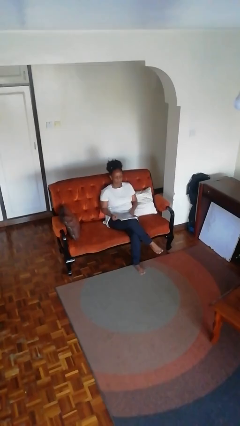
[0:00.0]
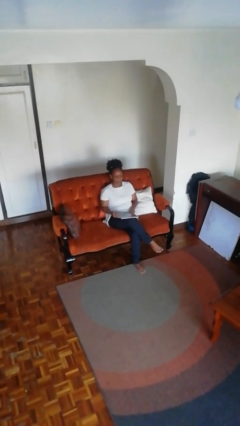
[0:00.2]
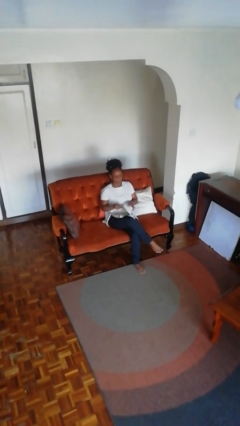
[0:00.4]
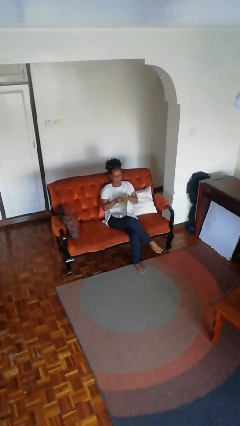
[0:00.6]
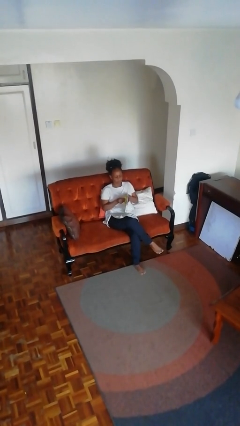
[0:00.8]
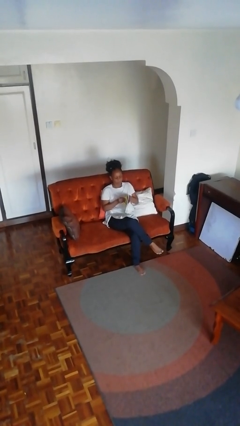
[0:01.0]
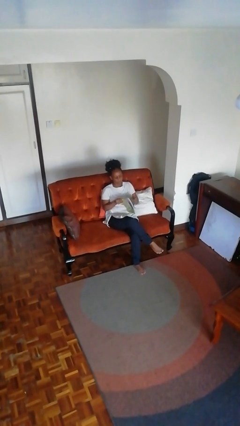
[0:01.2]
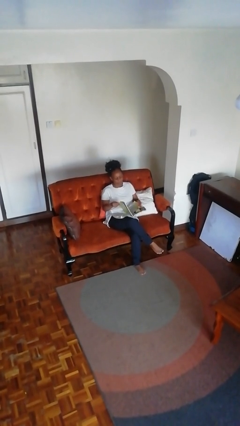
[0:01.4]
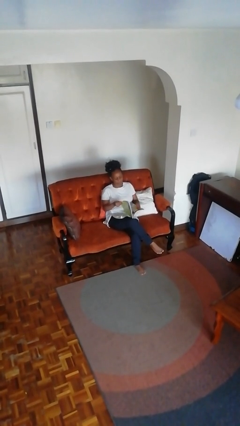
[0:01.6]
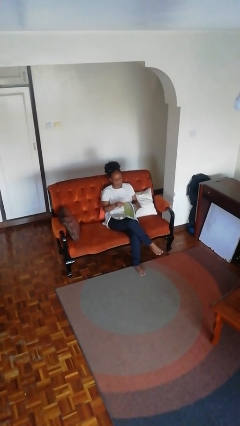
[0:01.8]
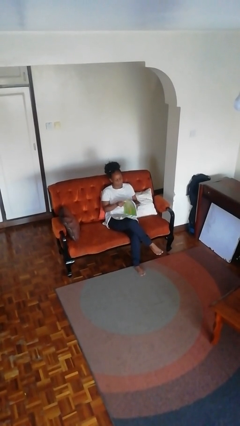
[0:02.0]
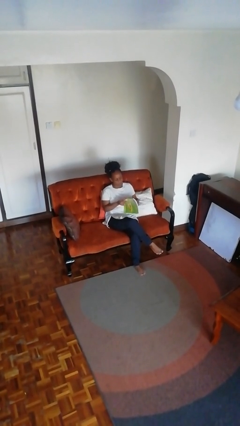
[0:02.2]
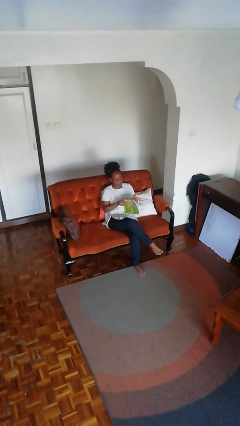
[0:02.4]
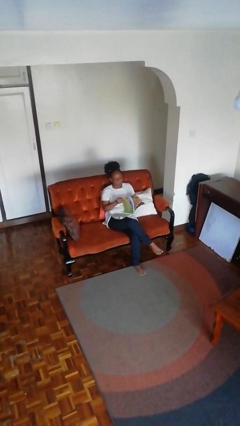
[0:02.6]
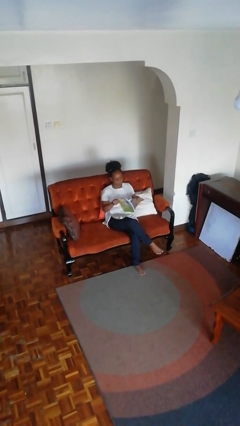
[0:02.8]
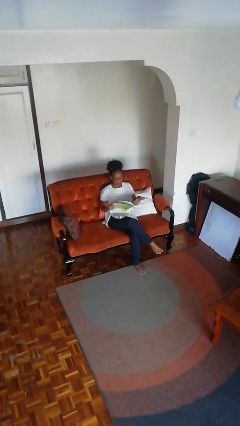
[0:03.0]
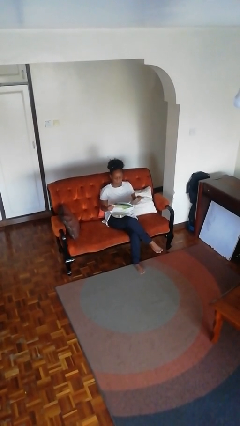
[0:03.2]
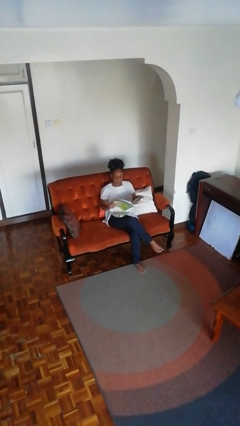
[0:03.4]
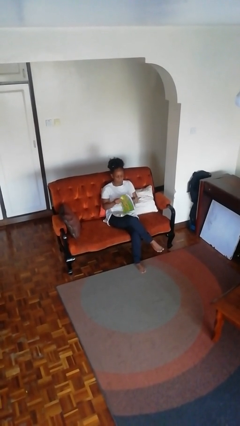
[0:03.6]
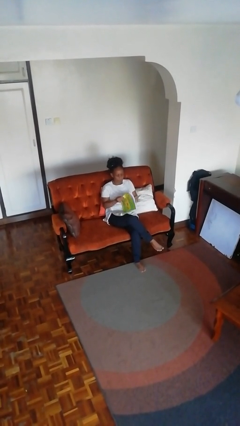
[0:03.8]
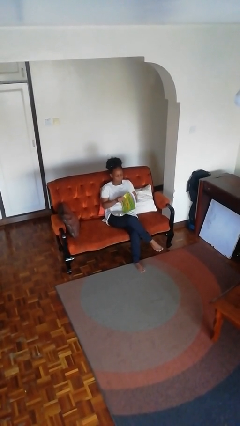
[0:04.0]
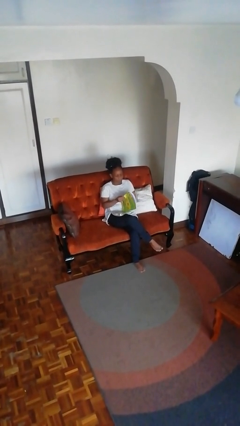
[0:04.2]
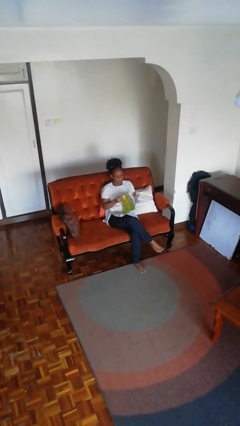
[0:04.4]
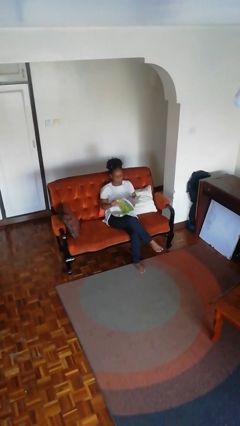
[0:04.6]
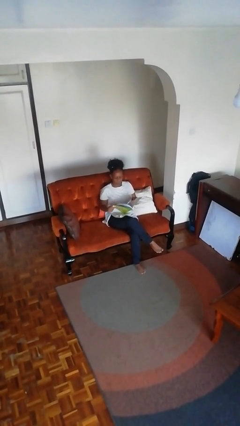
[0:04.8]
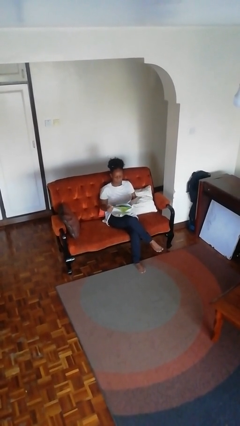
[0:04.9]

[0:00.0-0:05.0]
person reads magazine

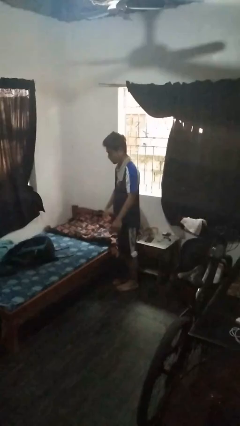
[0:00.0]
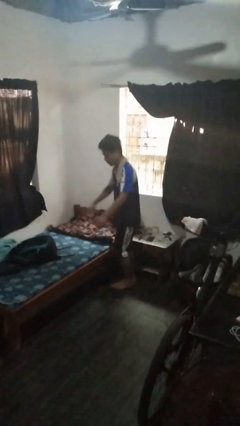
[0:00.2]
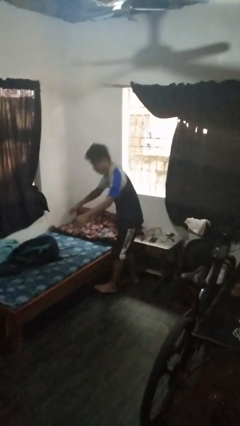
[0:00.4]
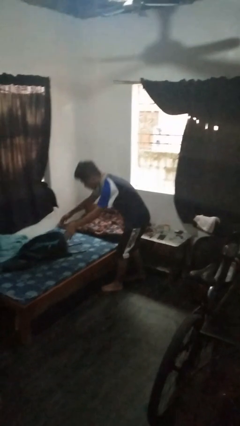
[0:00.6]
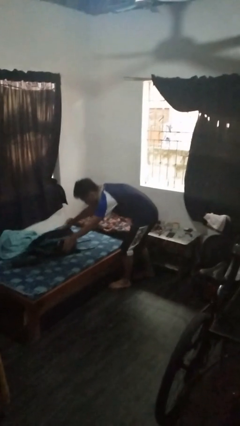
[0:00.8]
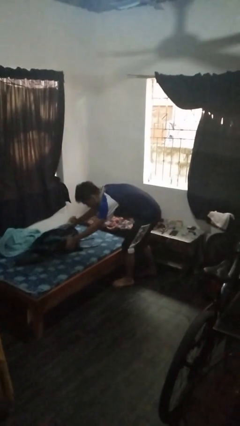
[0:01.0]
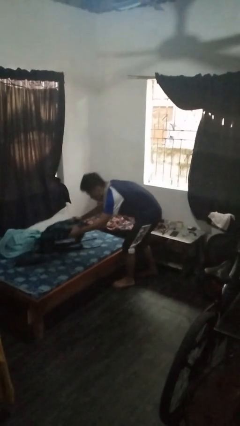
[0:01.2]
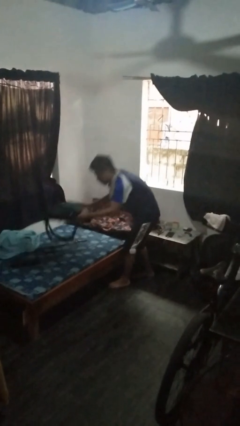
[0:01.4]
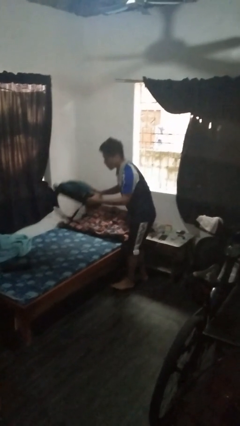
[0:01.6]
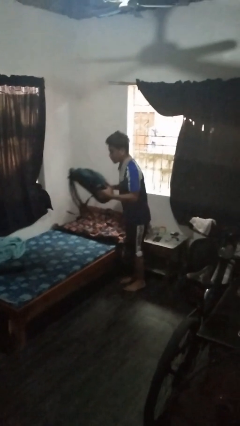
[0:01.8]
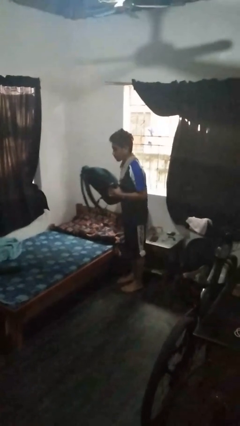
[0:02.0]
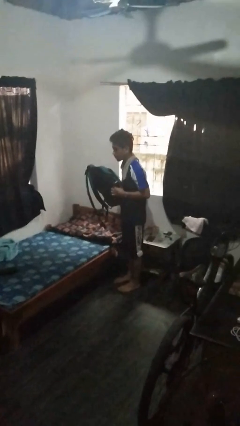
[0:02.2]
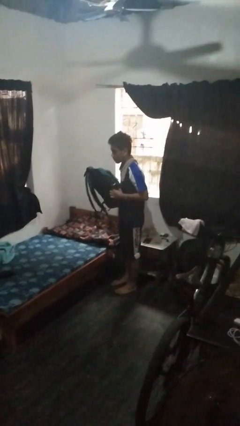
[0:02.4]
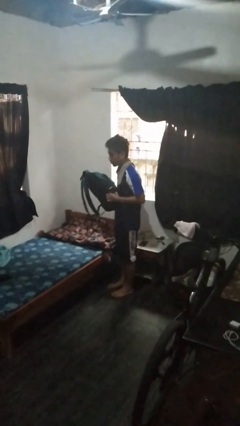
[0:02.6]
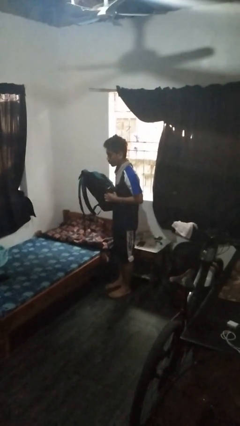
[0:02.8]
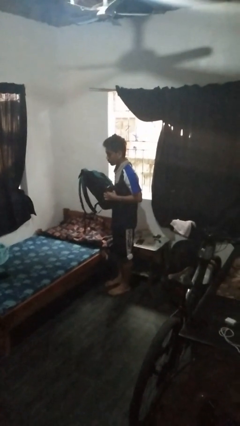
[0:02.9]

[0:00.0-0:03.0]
person picks up object from bed

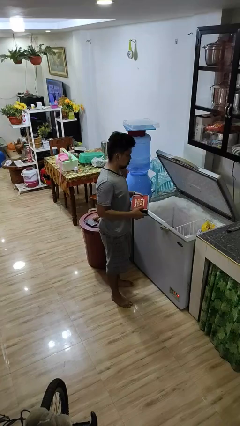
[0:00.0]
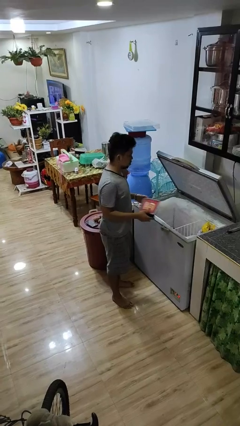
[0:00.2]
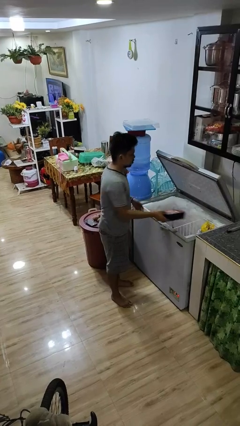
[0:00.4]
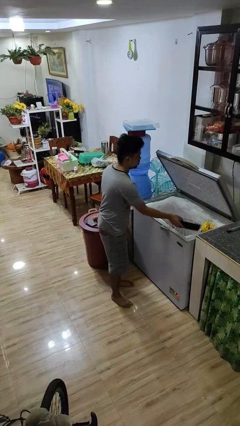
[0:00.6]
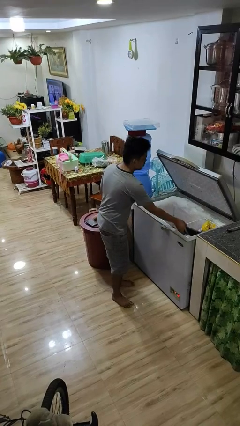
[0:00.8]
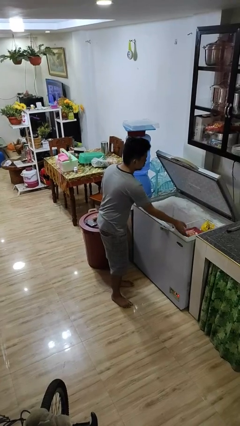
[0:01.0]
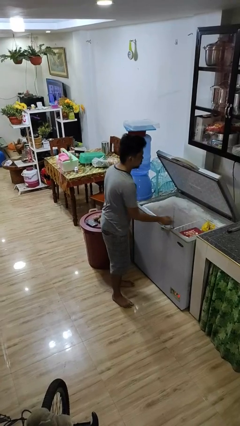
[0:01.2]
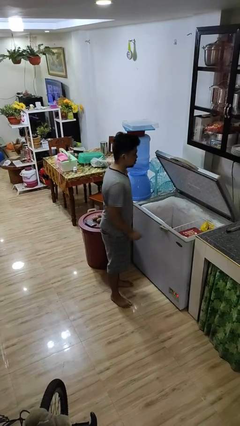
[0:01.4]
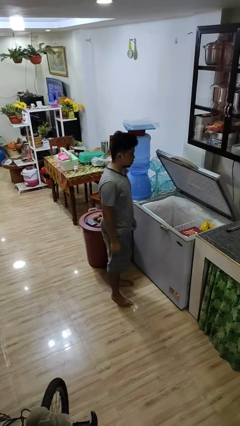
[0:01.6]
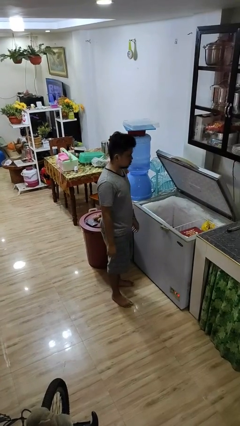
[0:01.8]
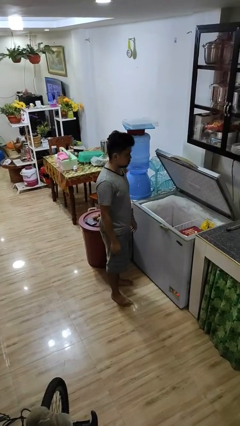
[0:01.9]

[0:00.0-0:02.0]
person puts object into refrigerator

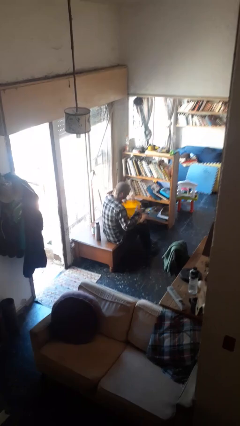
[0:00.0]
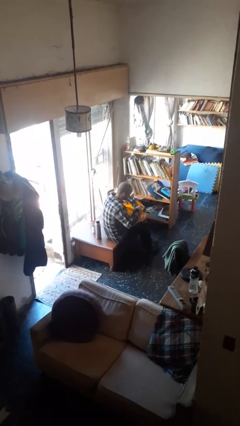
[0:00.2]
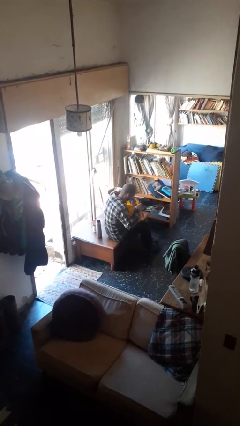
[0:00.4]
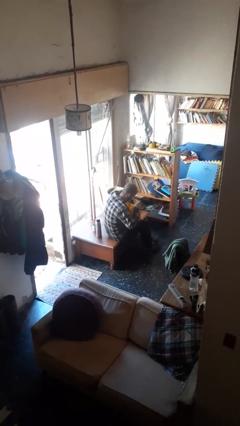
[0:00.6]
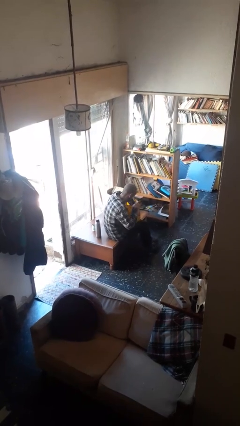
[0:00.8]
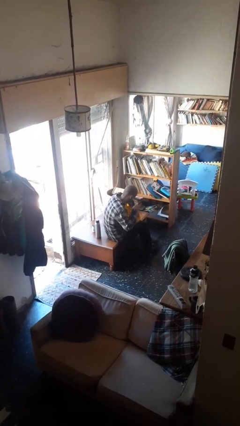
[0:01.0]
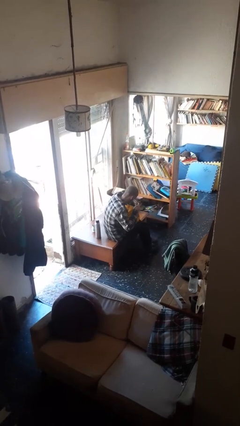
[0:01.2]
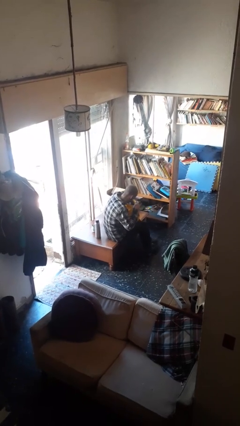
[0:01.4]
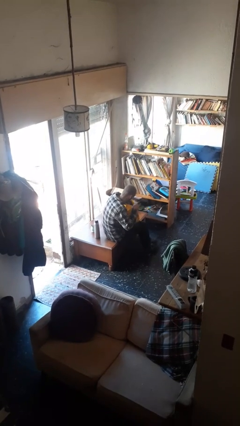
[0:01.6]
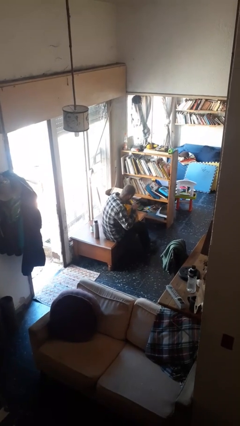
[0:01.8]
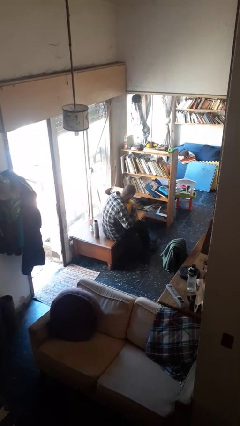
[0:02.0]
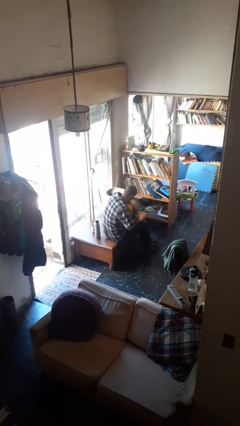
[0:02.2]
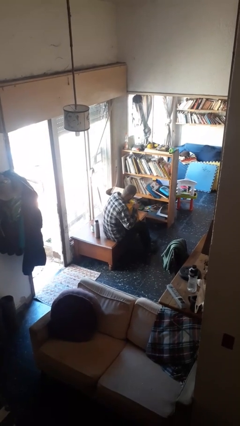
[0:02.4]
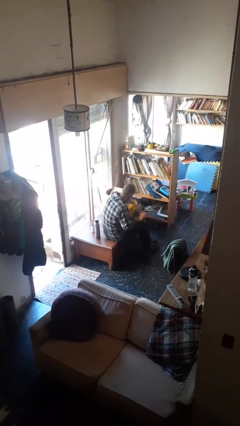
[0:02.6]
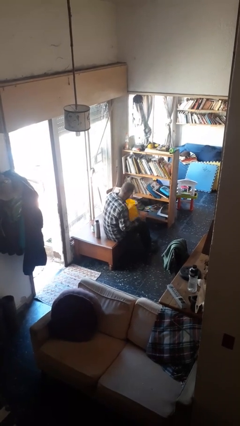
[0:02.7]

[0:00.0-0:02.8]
person searches in bag

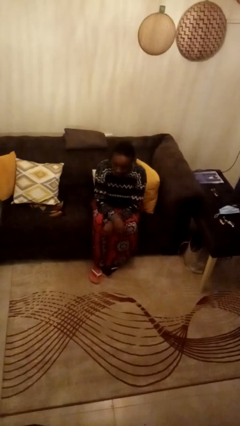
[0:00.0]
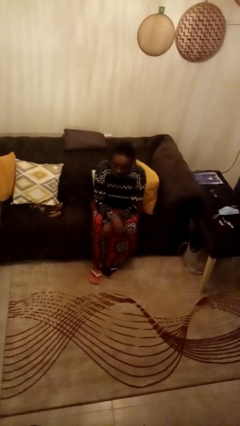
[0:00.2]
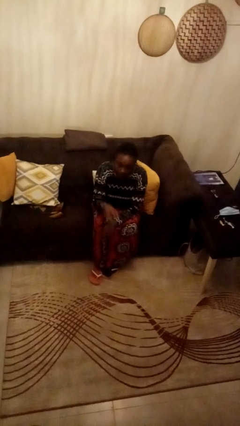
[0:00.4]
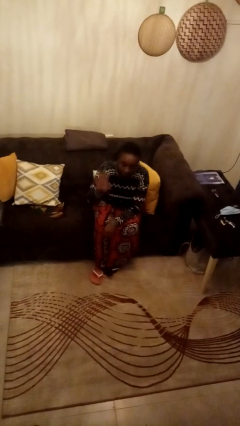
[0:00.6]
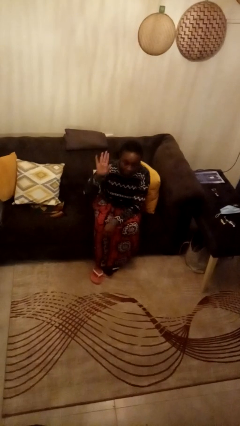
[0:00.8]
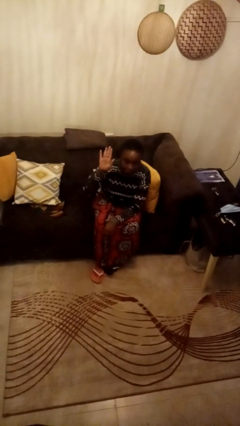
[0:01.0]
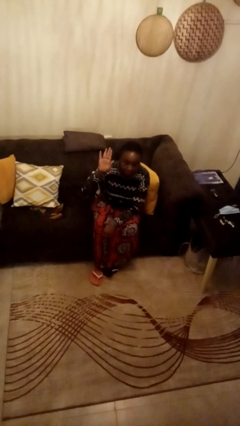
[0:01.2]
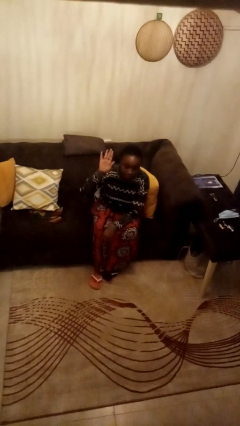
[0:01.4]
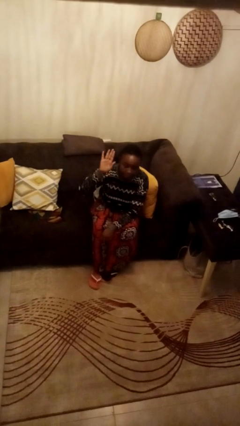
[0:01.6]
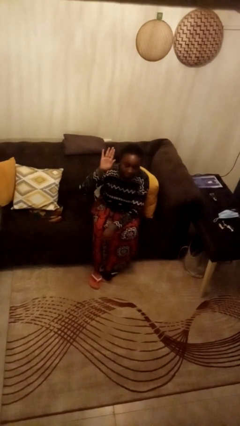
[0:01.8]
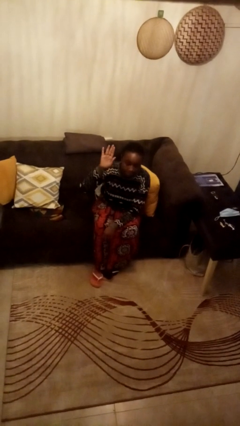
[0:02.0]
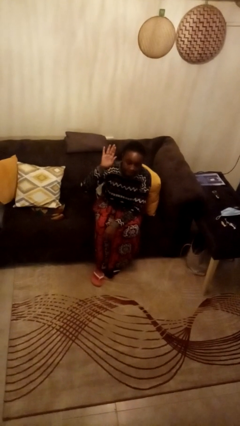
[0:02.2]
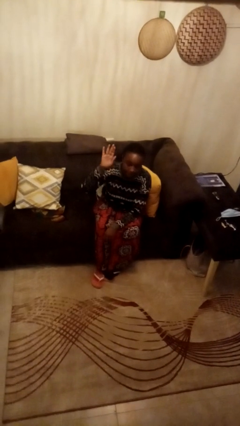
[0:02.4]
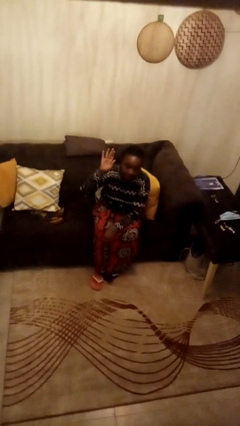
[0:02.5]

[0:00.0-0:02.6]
person gestures raise hand

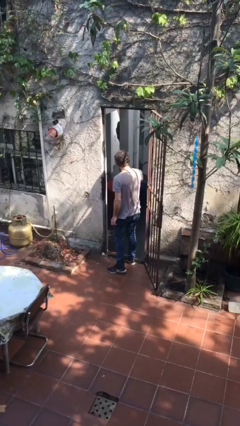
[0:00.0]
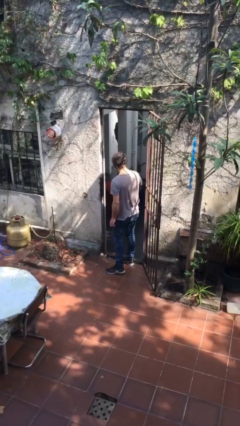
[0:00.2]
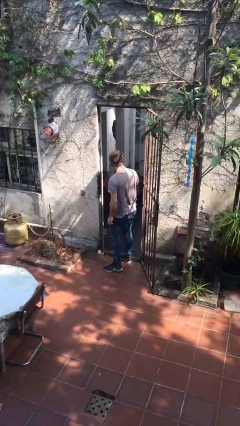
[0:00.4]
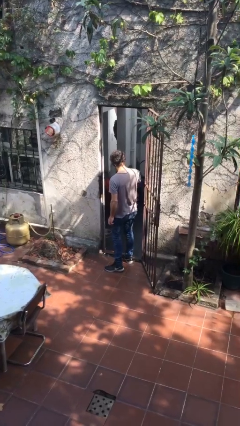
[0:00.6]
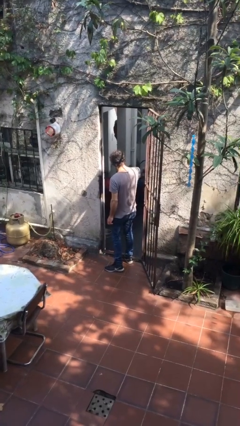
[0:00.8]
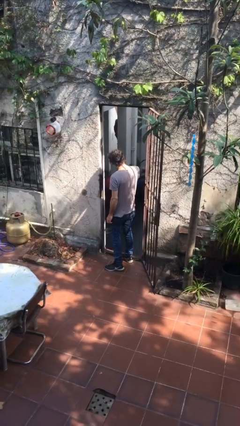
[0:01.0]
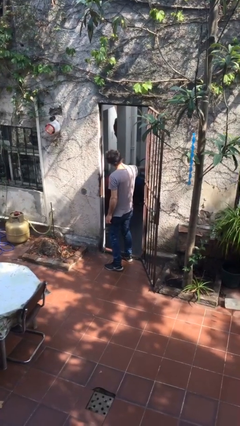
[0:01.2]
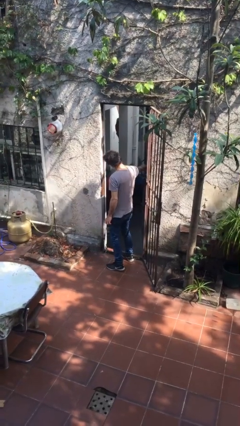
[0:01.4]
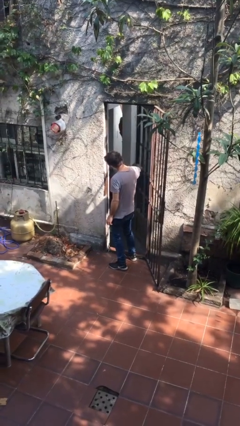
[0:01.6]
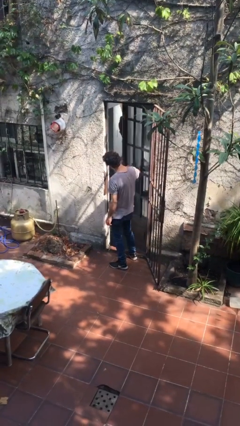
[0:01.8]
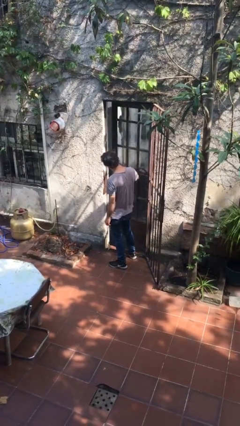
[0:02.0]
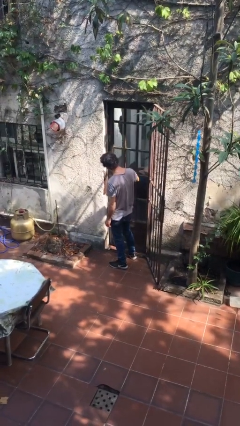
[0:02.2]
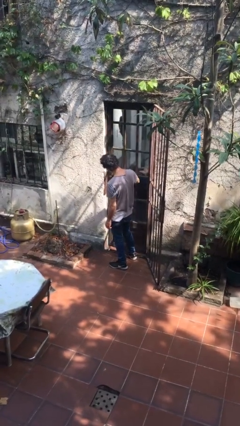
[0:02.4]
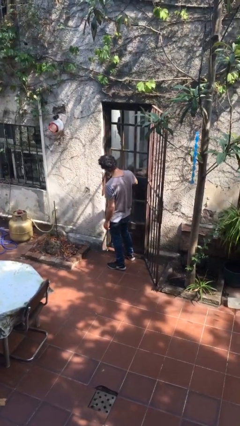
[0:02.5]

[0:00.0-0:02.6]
person closes facility door
